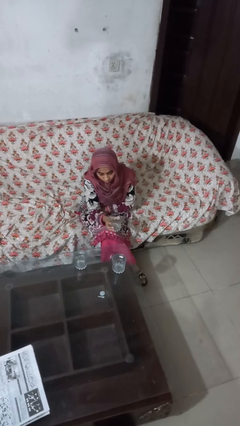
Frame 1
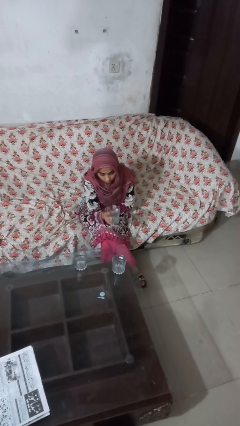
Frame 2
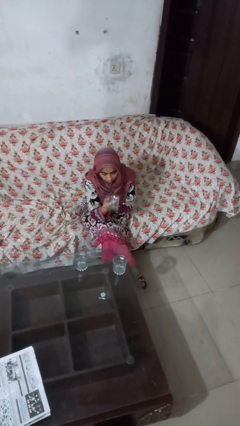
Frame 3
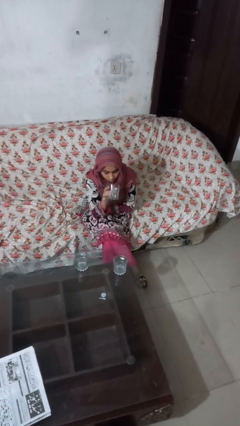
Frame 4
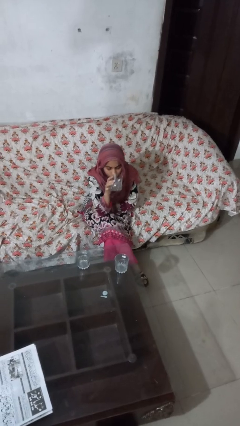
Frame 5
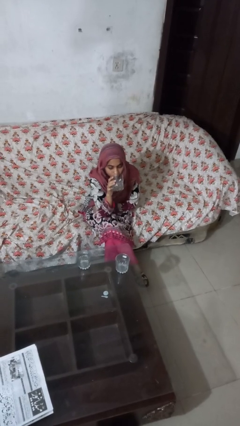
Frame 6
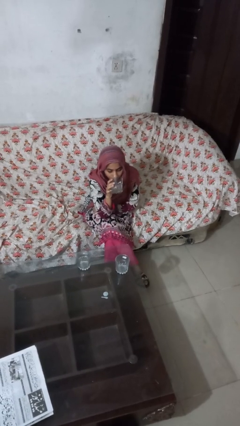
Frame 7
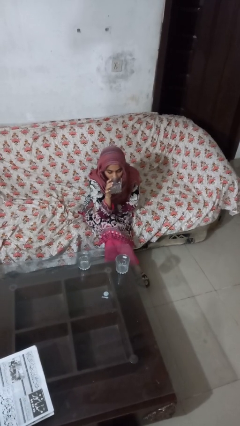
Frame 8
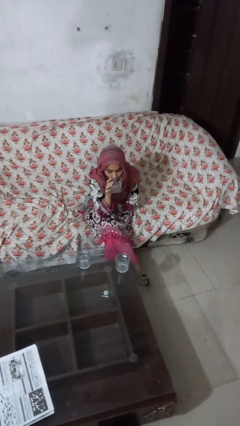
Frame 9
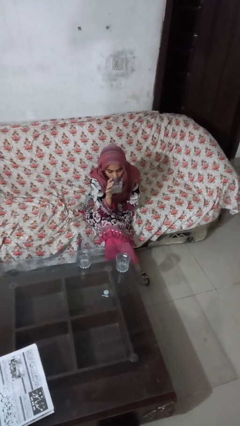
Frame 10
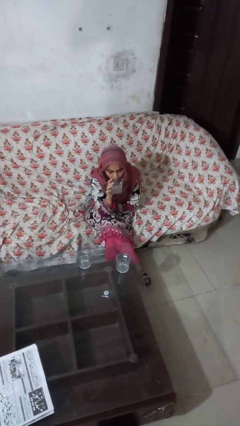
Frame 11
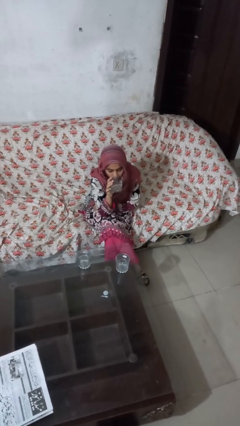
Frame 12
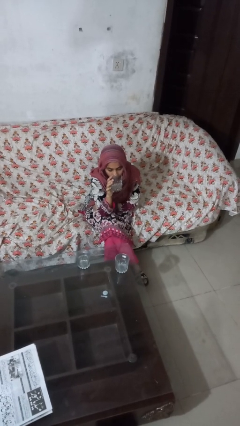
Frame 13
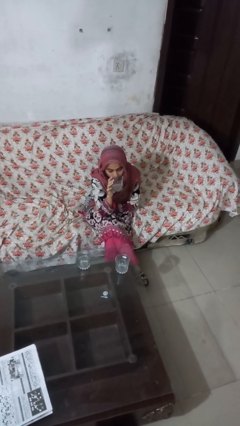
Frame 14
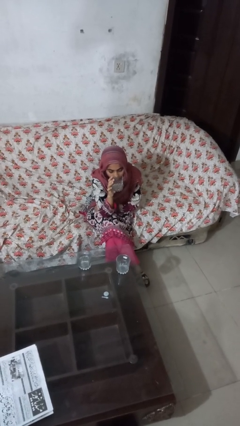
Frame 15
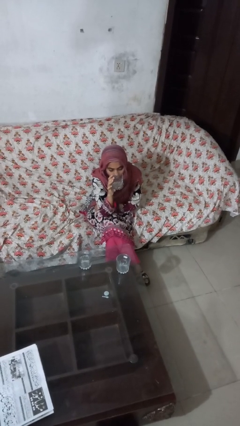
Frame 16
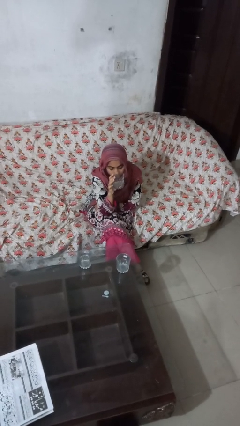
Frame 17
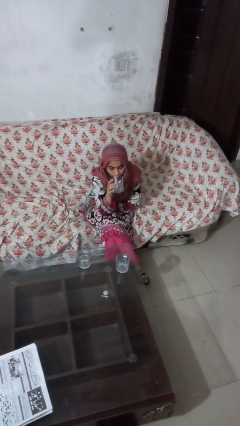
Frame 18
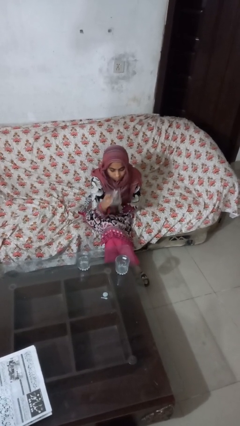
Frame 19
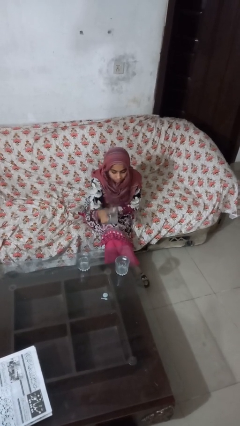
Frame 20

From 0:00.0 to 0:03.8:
person drinks from shotglass

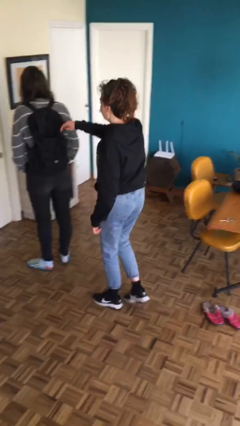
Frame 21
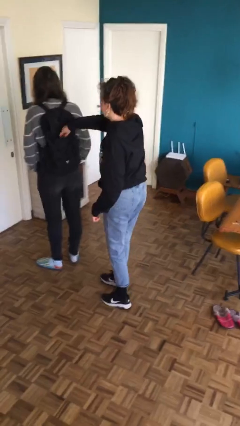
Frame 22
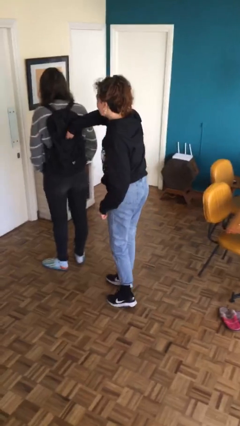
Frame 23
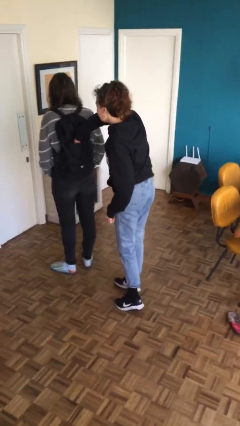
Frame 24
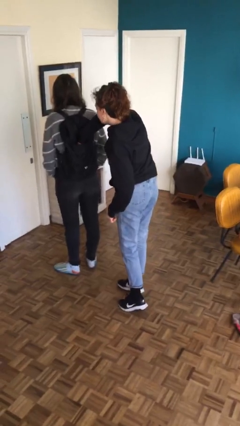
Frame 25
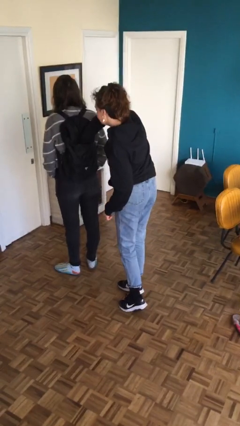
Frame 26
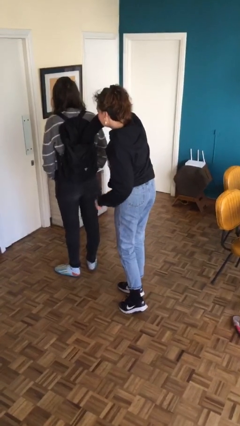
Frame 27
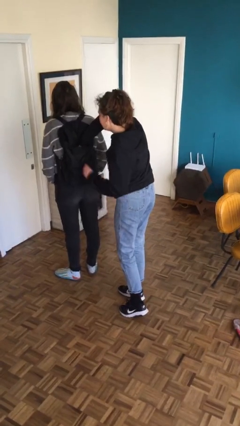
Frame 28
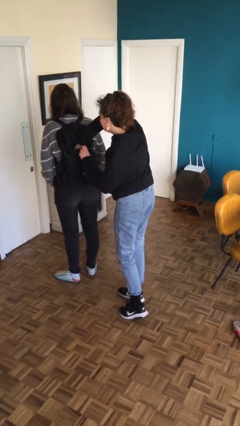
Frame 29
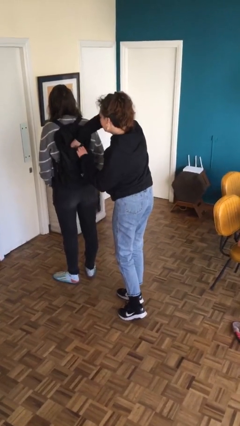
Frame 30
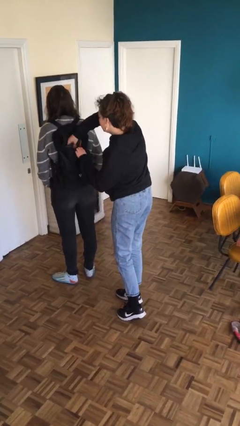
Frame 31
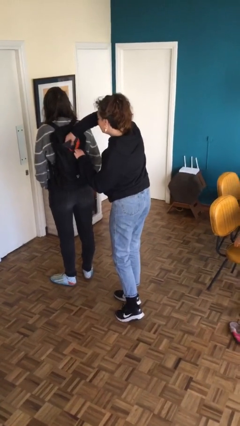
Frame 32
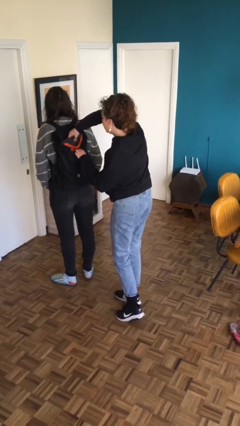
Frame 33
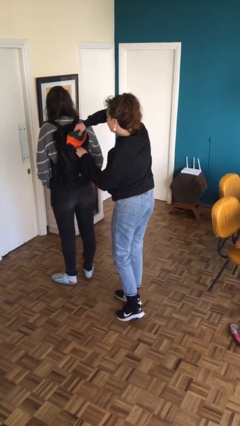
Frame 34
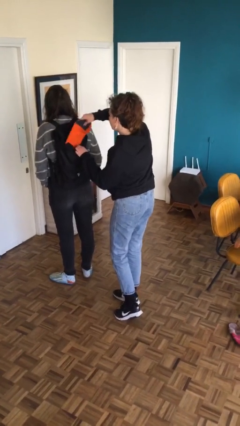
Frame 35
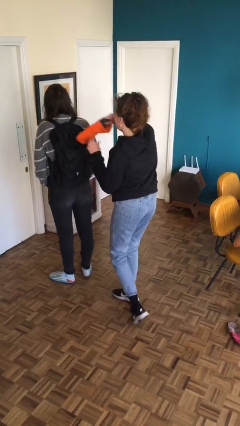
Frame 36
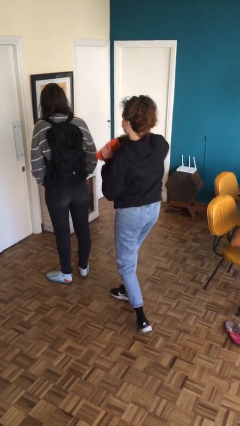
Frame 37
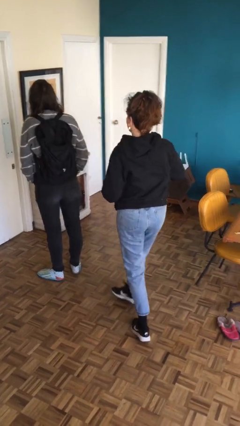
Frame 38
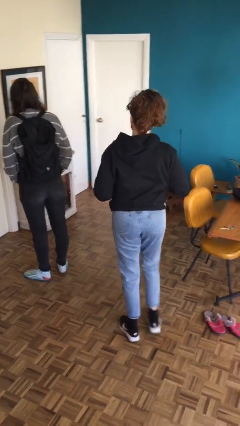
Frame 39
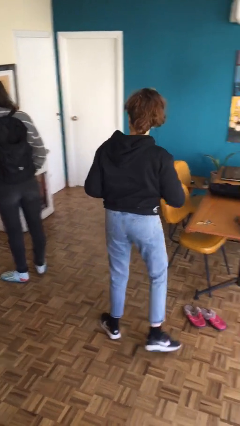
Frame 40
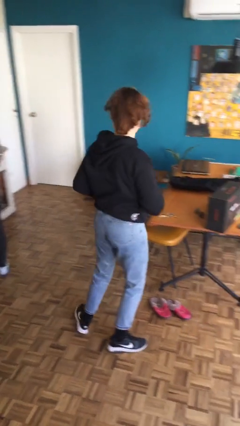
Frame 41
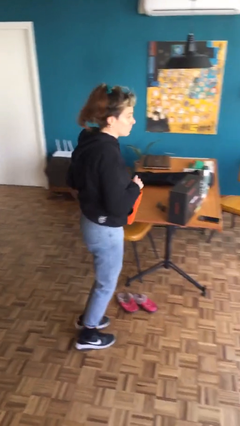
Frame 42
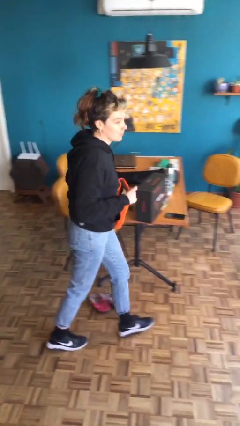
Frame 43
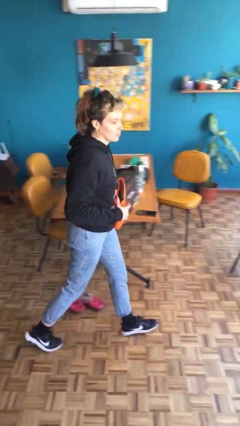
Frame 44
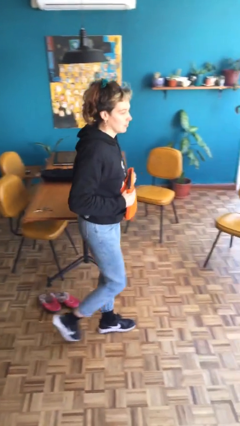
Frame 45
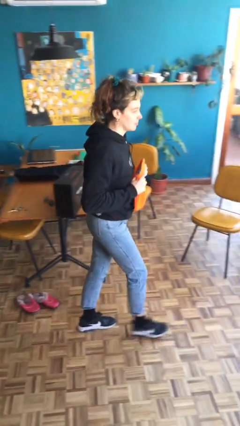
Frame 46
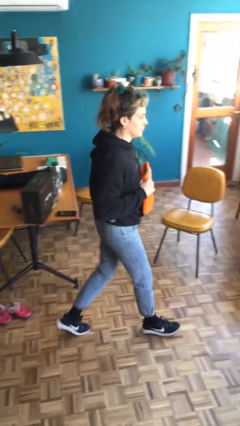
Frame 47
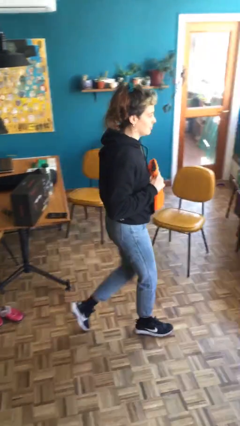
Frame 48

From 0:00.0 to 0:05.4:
person steals object from person

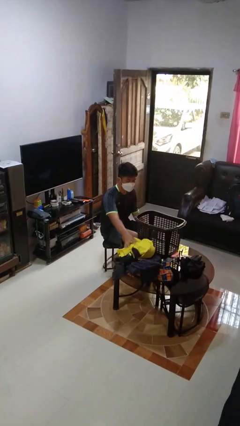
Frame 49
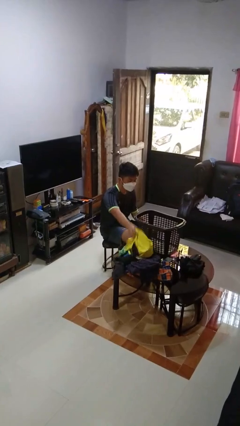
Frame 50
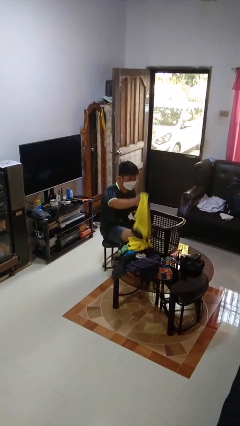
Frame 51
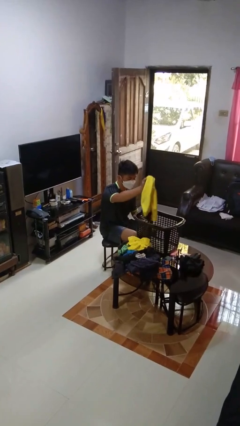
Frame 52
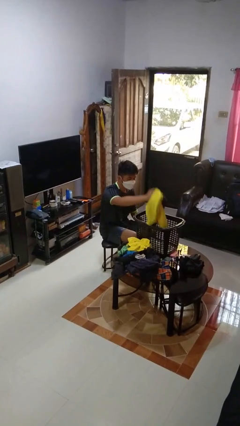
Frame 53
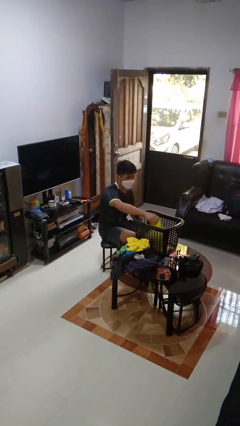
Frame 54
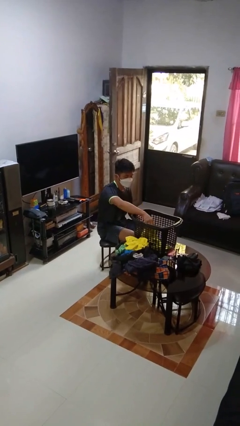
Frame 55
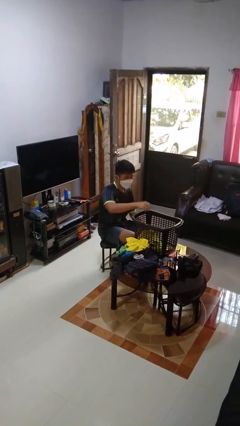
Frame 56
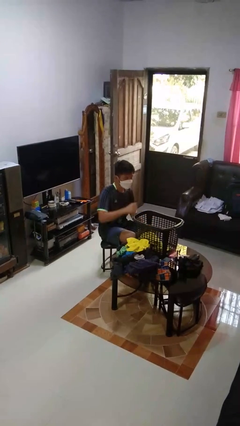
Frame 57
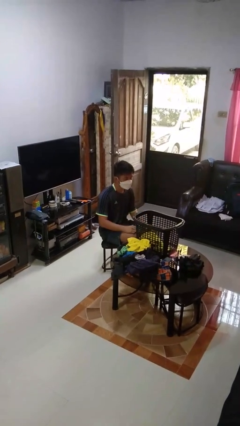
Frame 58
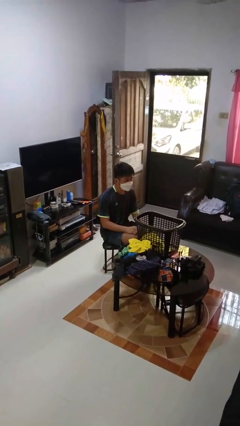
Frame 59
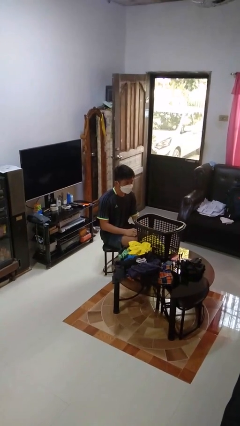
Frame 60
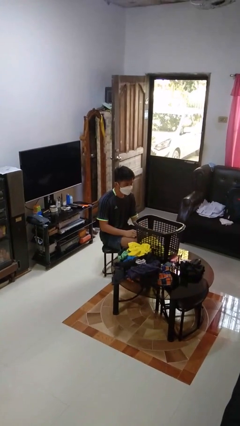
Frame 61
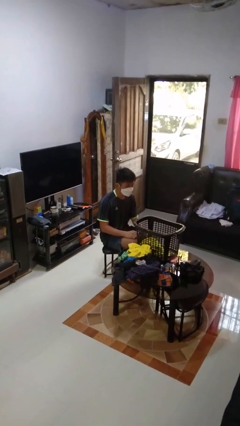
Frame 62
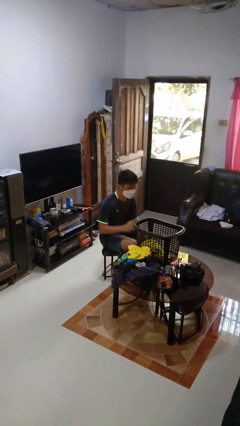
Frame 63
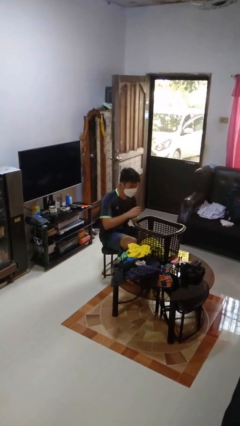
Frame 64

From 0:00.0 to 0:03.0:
person puts object into basket

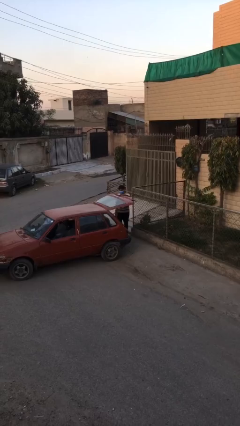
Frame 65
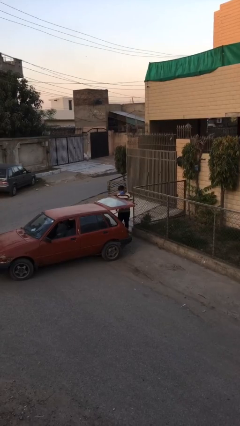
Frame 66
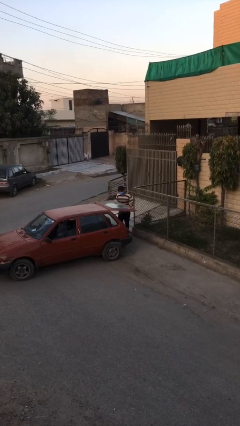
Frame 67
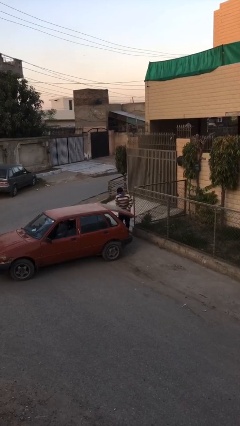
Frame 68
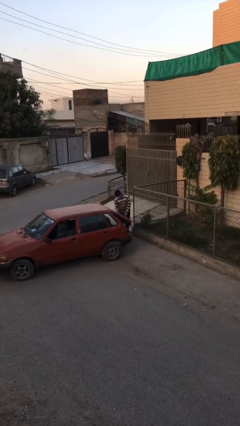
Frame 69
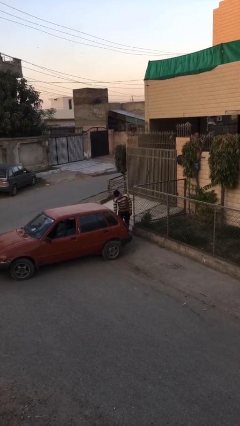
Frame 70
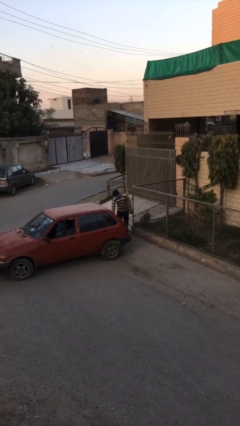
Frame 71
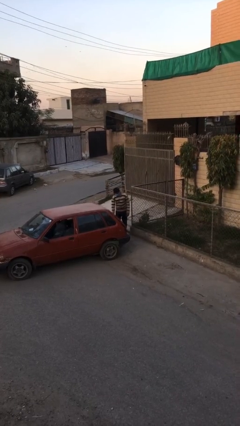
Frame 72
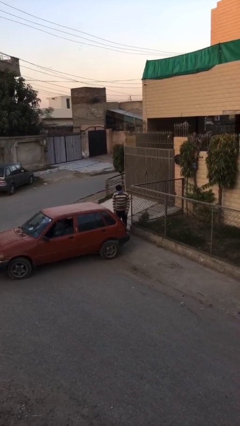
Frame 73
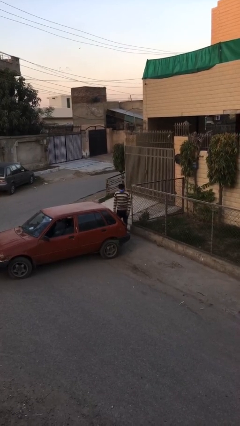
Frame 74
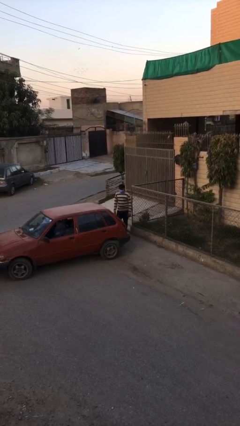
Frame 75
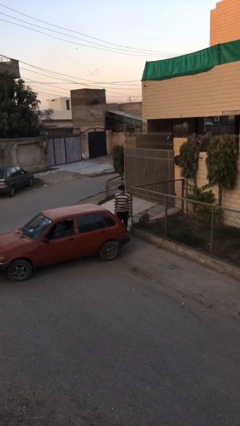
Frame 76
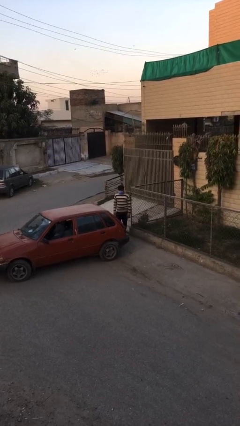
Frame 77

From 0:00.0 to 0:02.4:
person closes car trunk

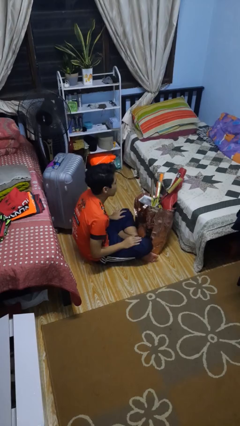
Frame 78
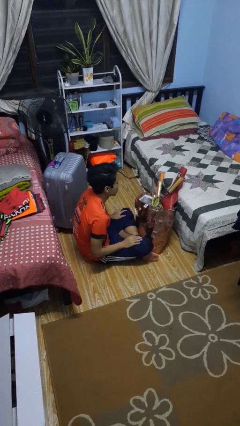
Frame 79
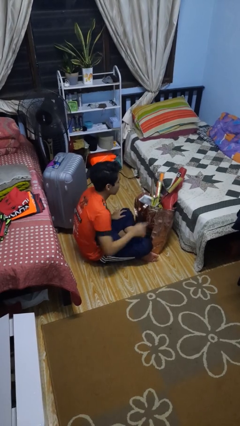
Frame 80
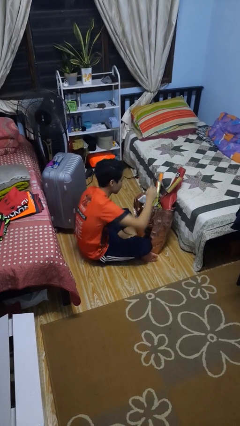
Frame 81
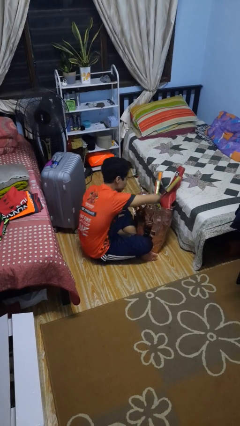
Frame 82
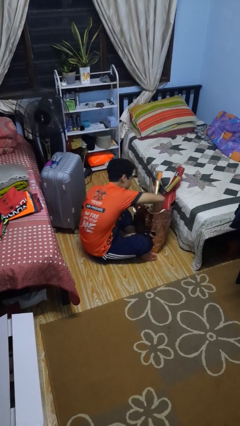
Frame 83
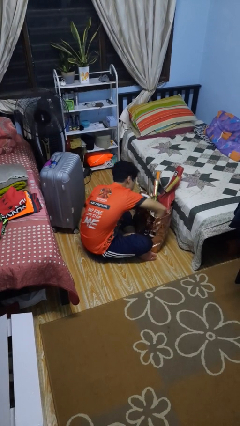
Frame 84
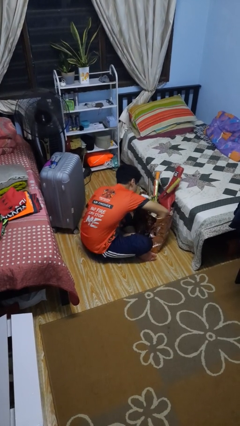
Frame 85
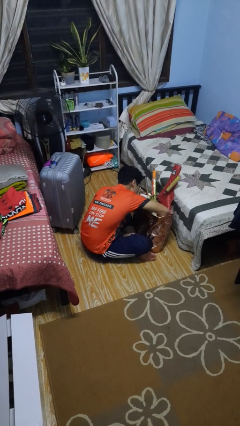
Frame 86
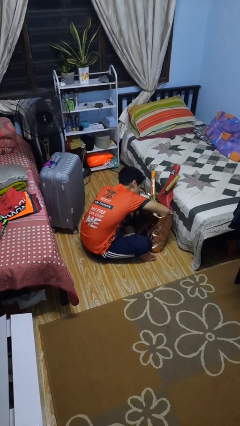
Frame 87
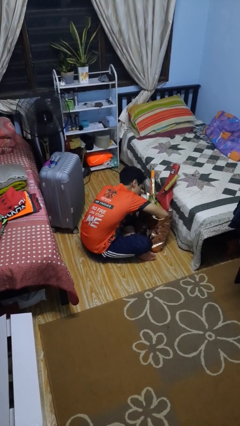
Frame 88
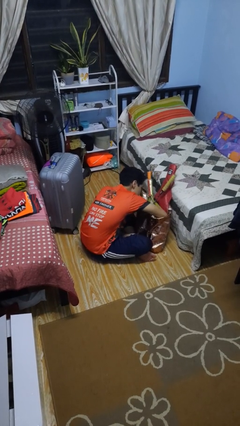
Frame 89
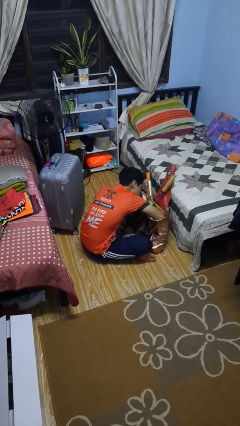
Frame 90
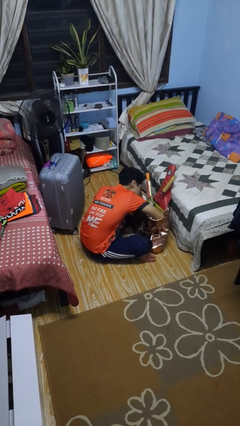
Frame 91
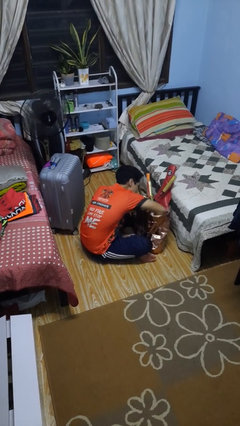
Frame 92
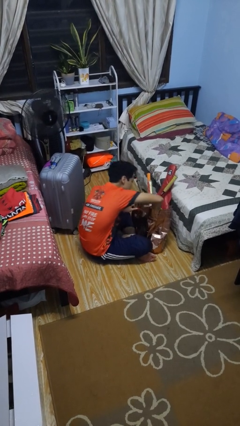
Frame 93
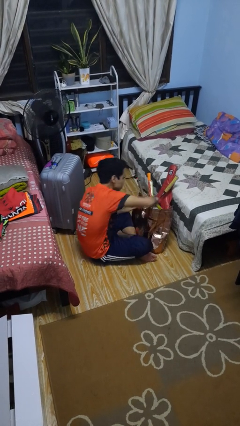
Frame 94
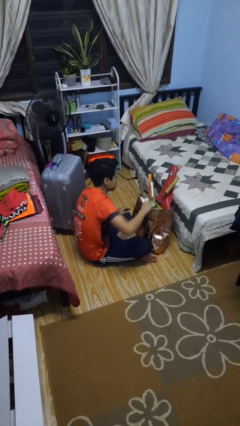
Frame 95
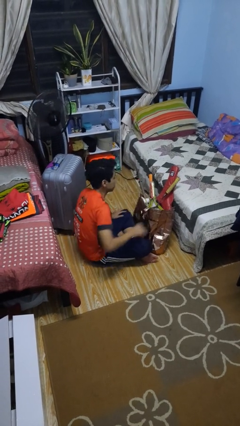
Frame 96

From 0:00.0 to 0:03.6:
person searches in bag
